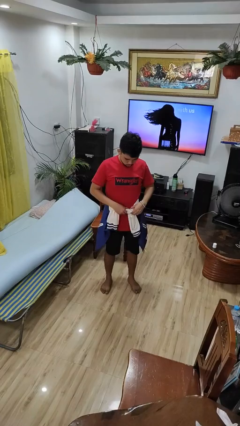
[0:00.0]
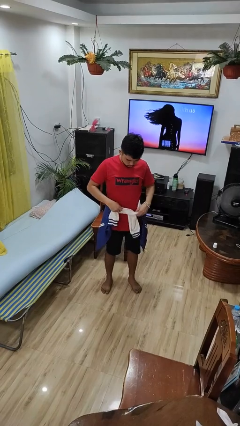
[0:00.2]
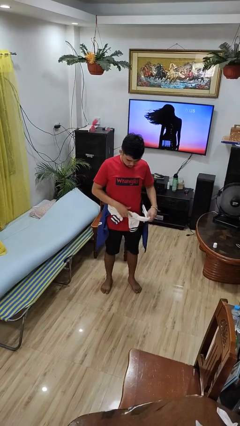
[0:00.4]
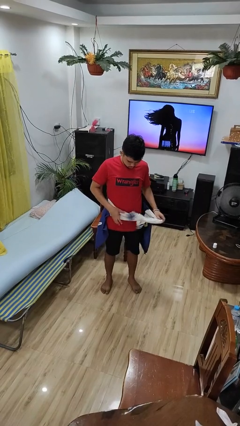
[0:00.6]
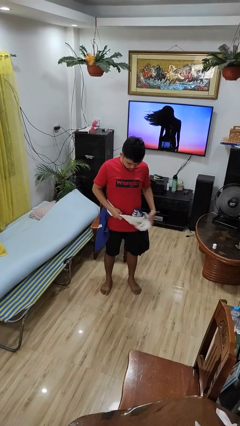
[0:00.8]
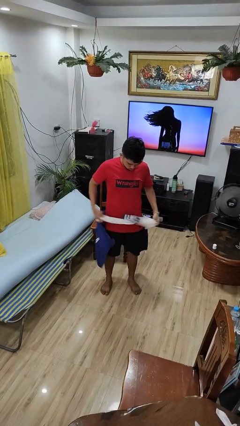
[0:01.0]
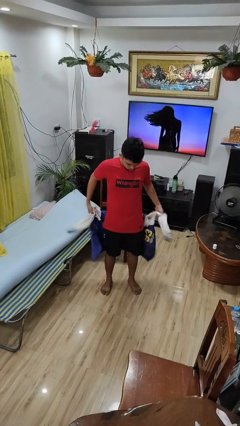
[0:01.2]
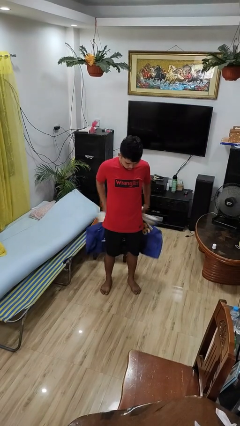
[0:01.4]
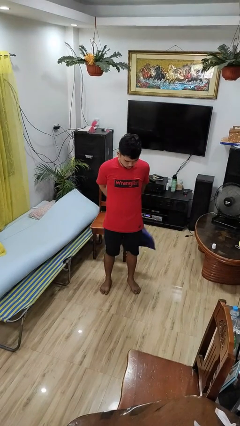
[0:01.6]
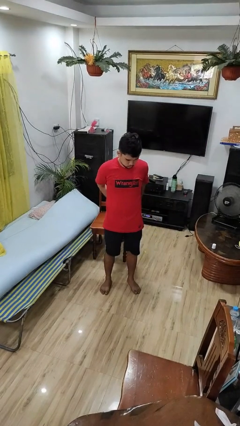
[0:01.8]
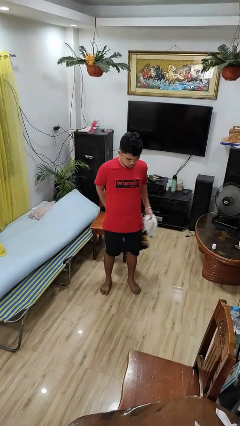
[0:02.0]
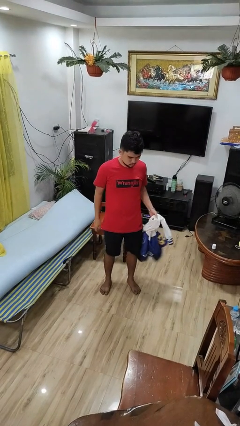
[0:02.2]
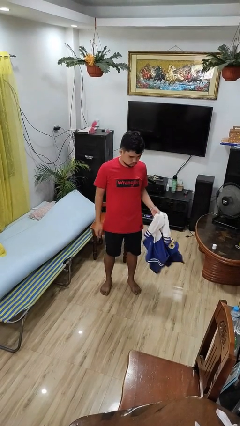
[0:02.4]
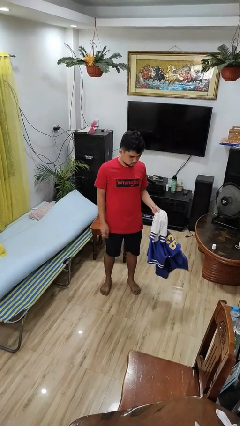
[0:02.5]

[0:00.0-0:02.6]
person unties jacket around waist

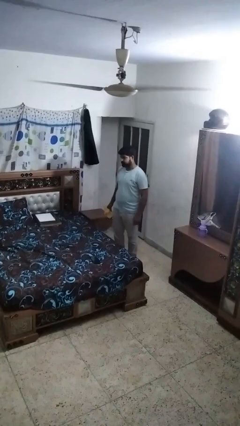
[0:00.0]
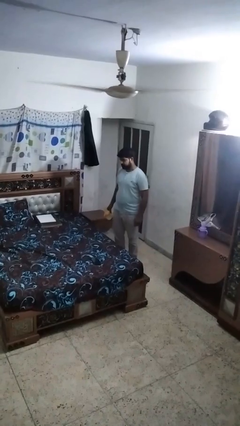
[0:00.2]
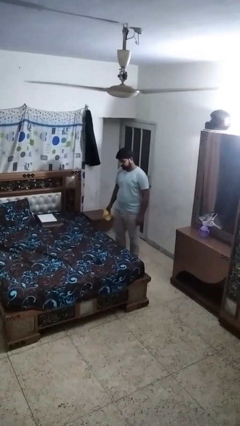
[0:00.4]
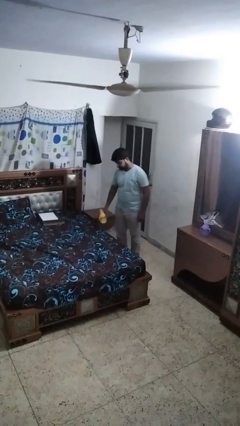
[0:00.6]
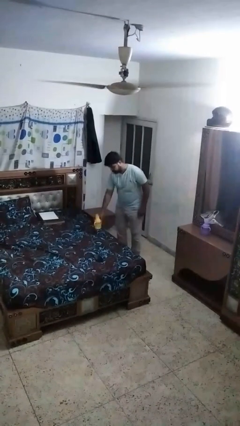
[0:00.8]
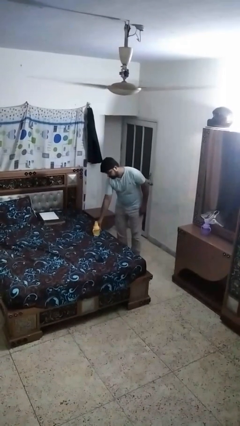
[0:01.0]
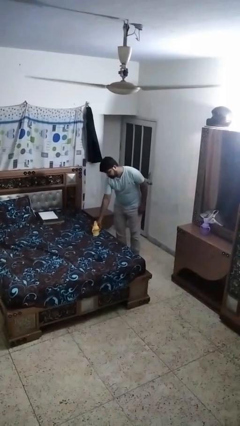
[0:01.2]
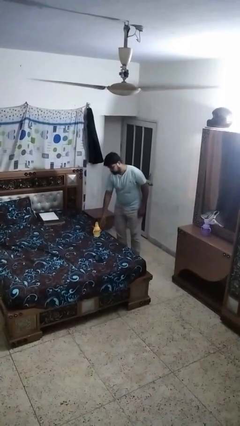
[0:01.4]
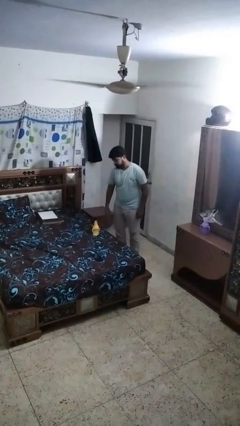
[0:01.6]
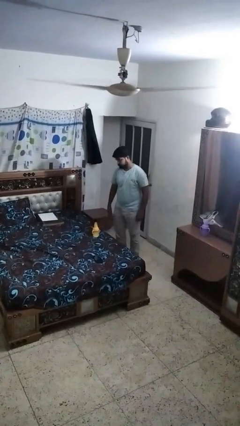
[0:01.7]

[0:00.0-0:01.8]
person puts down object on bed

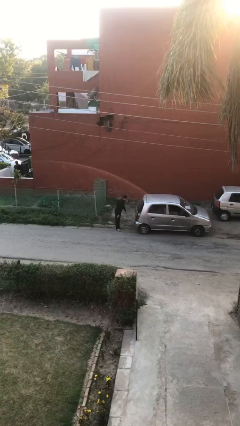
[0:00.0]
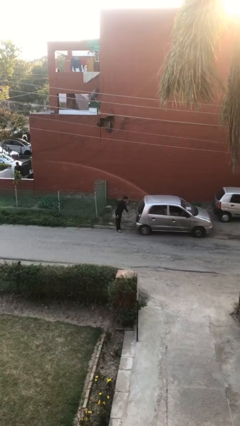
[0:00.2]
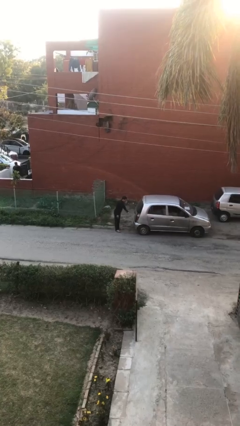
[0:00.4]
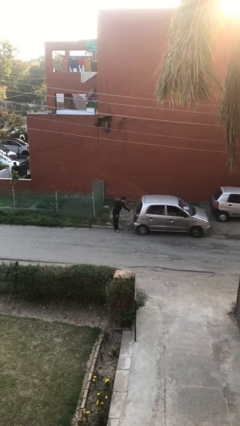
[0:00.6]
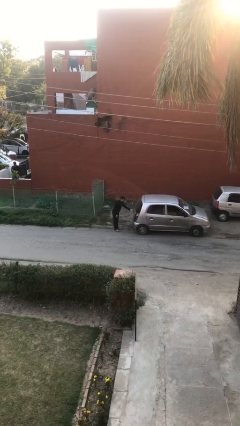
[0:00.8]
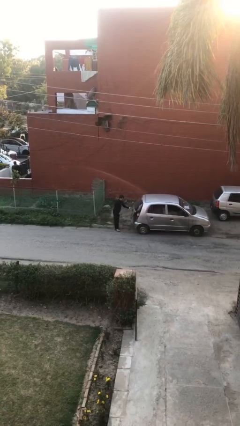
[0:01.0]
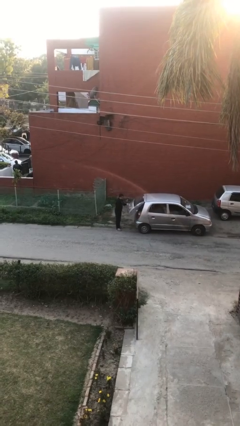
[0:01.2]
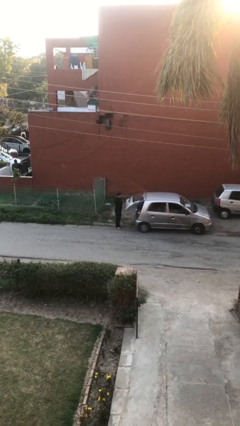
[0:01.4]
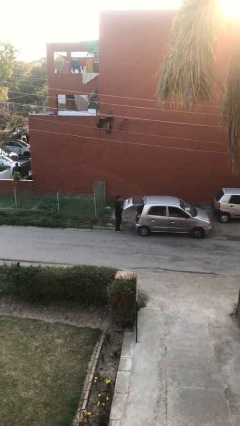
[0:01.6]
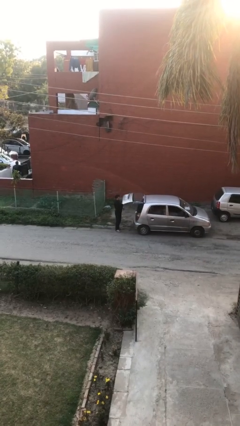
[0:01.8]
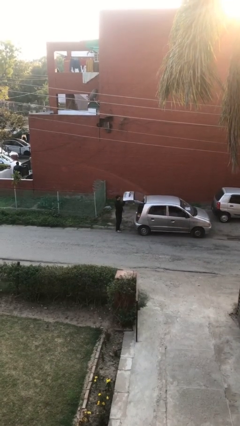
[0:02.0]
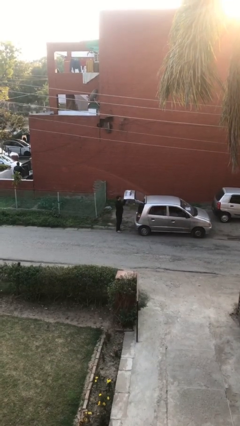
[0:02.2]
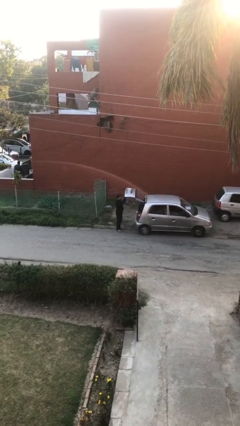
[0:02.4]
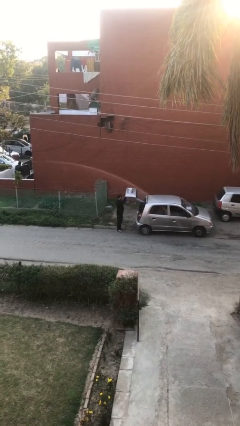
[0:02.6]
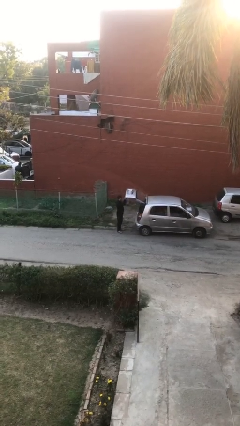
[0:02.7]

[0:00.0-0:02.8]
person opens car trunk

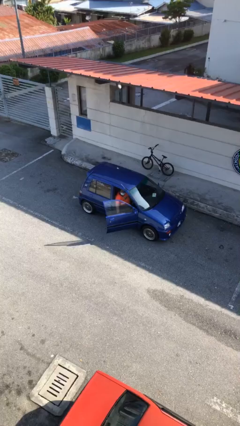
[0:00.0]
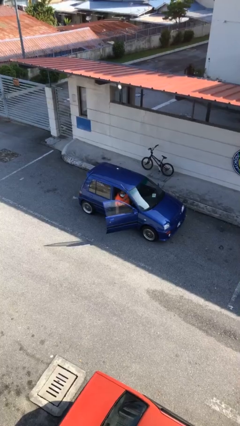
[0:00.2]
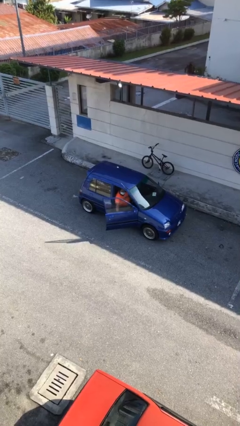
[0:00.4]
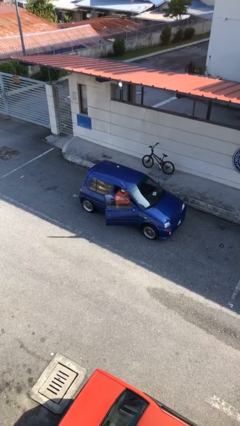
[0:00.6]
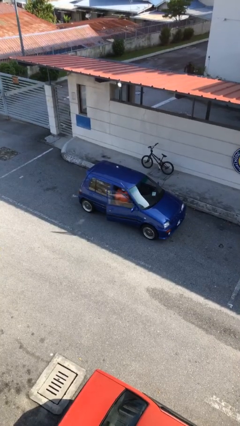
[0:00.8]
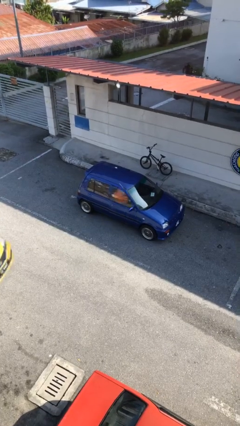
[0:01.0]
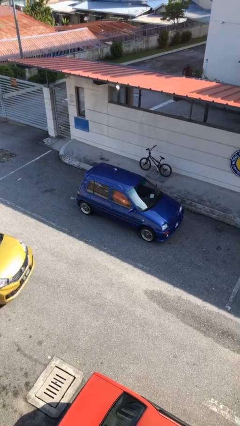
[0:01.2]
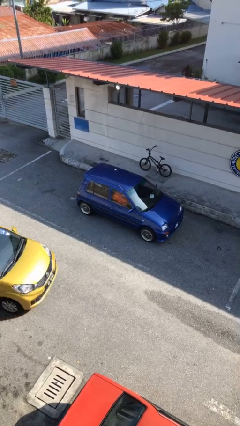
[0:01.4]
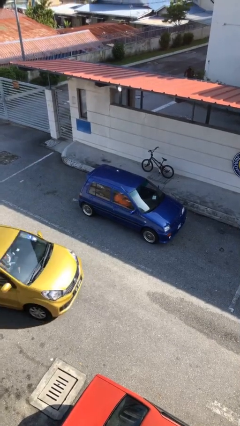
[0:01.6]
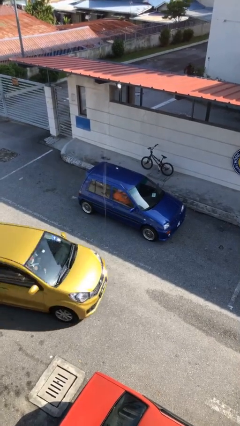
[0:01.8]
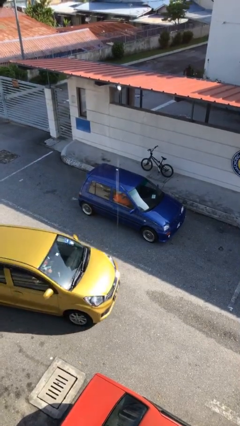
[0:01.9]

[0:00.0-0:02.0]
person closes car door

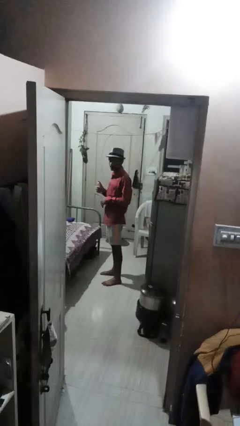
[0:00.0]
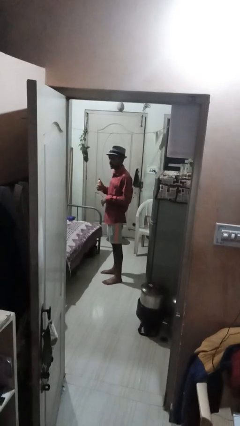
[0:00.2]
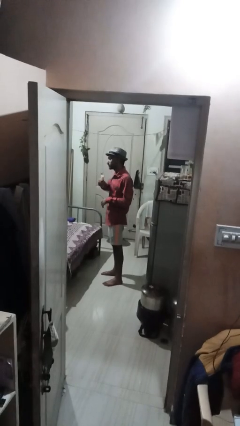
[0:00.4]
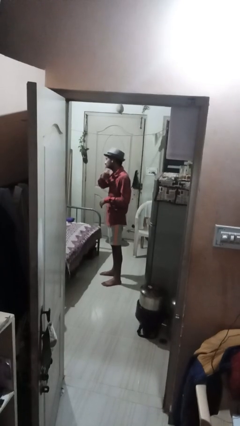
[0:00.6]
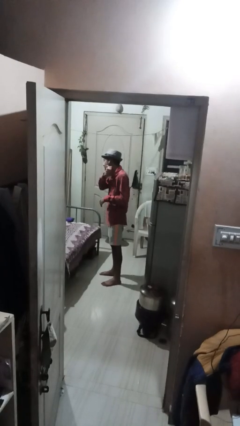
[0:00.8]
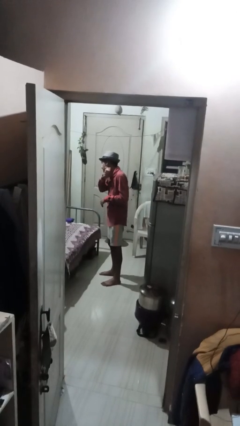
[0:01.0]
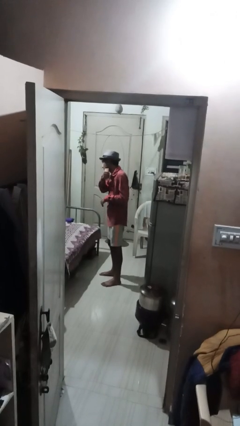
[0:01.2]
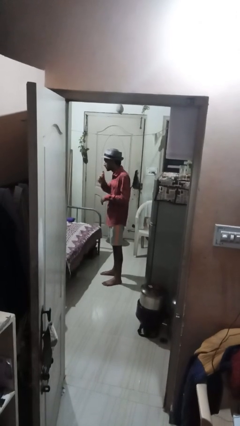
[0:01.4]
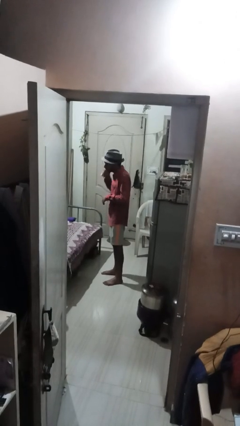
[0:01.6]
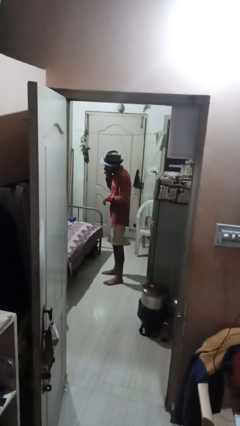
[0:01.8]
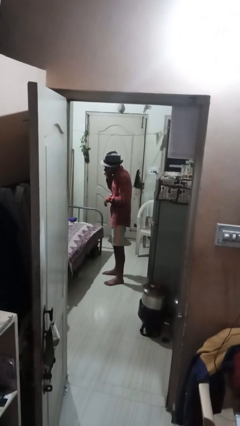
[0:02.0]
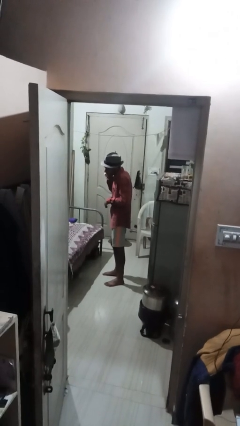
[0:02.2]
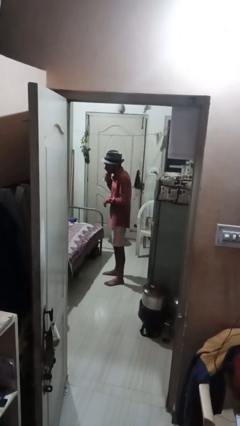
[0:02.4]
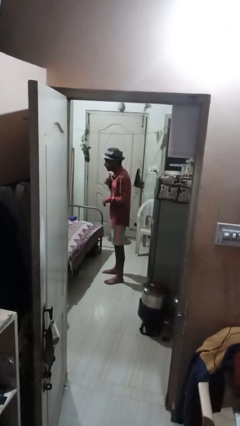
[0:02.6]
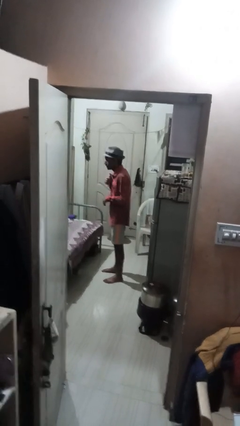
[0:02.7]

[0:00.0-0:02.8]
person applies deodorant

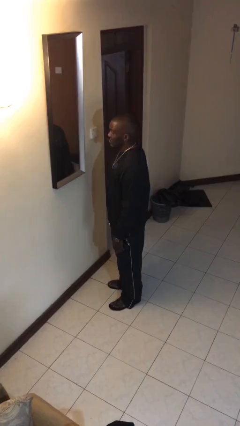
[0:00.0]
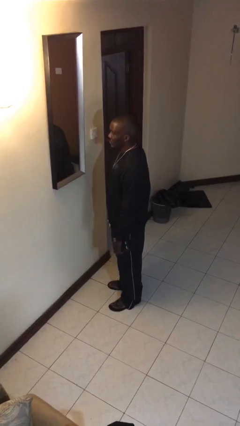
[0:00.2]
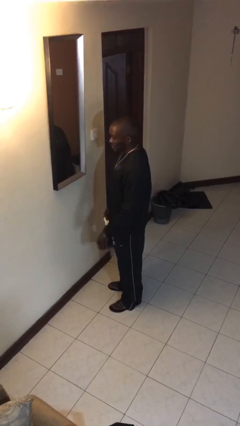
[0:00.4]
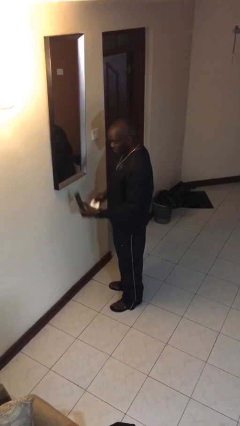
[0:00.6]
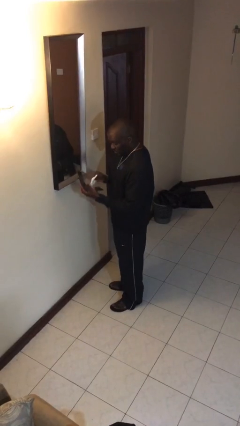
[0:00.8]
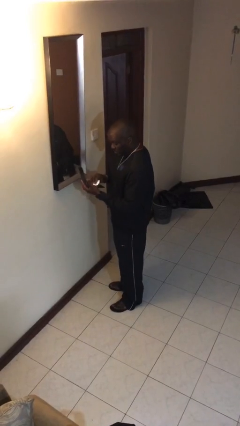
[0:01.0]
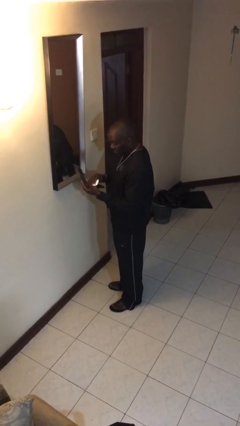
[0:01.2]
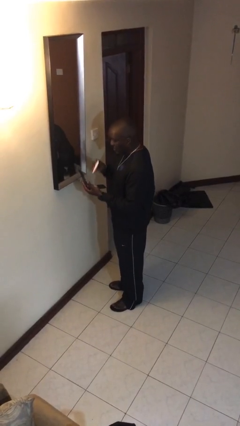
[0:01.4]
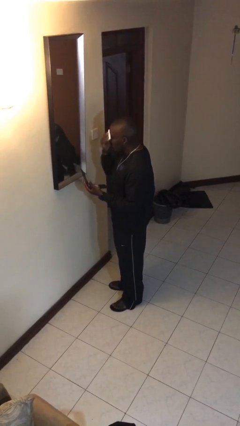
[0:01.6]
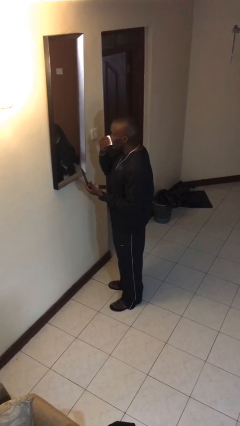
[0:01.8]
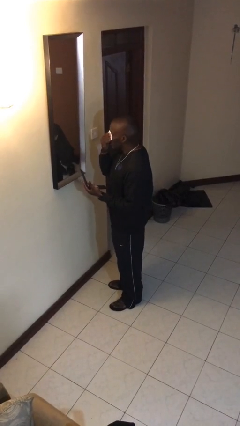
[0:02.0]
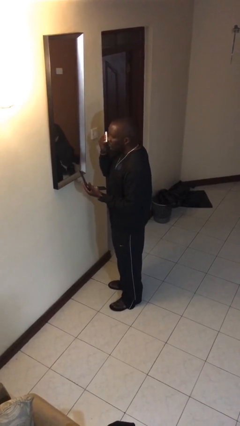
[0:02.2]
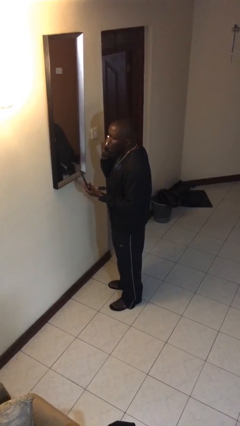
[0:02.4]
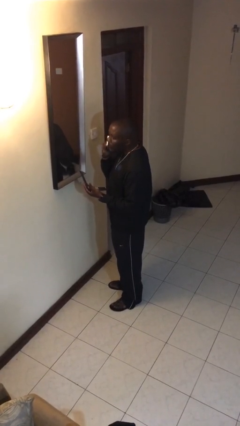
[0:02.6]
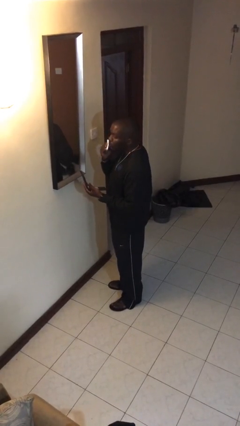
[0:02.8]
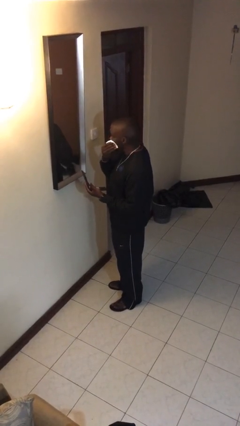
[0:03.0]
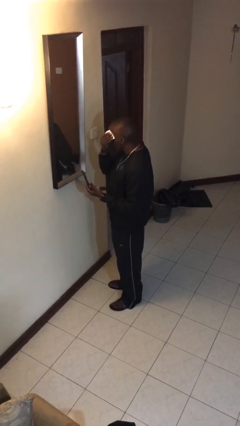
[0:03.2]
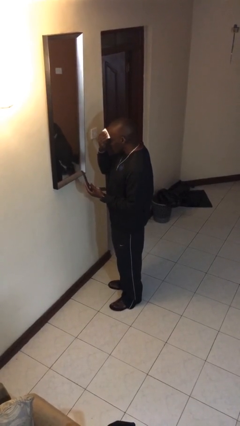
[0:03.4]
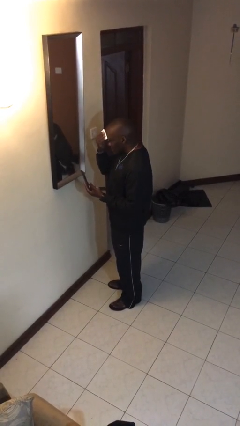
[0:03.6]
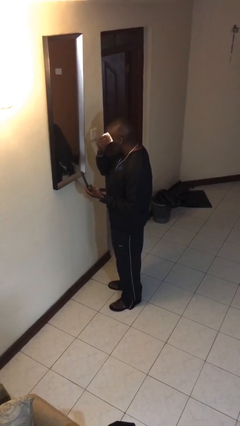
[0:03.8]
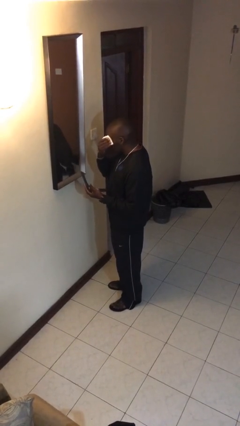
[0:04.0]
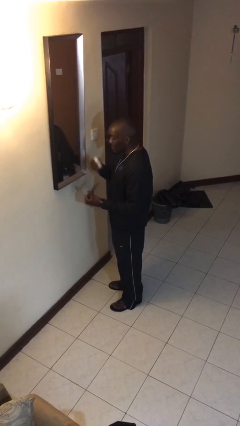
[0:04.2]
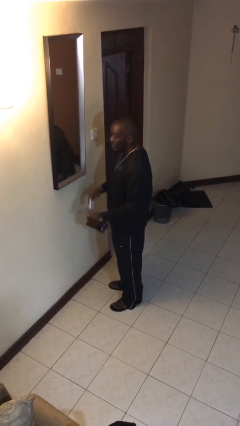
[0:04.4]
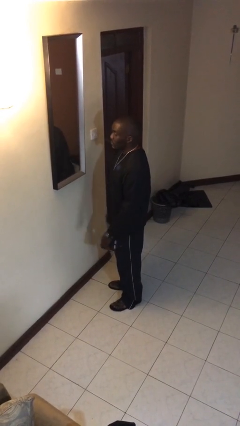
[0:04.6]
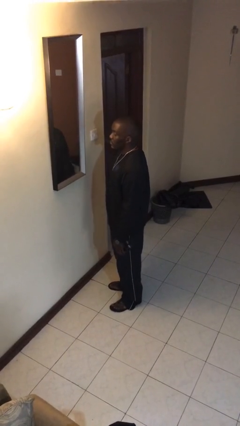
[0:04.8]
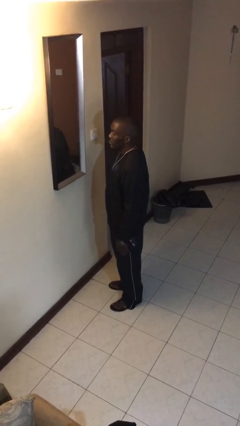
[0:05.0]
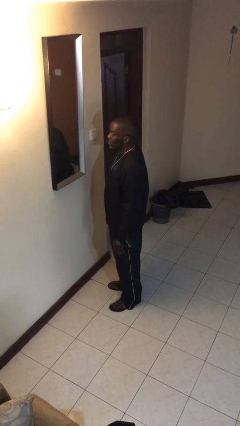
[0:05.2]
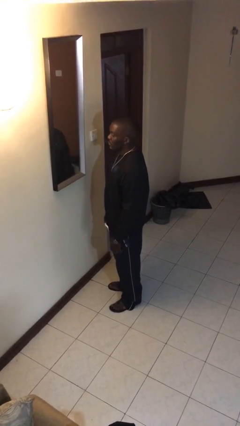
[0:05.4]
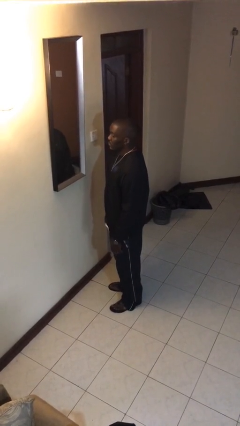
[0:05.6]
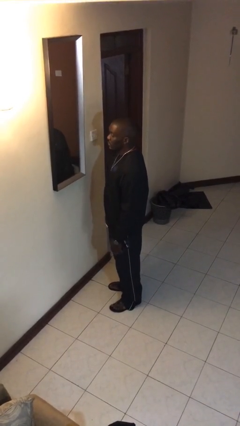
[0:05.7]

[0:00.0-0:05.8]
person applies foundation makeup
